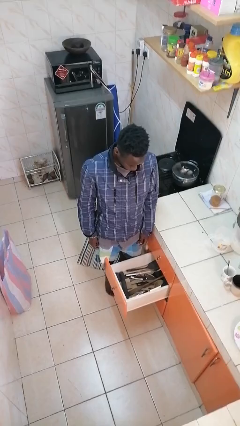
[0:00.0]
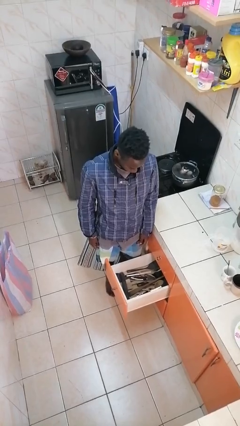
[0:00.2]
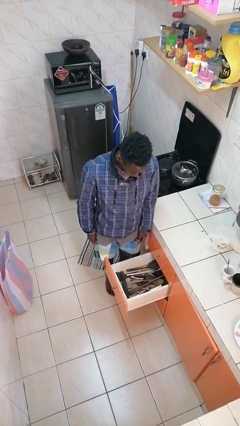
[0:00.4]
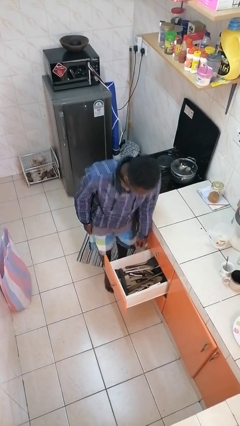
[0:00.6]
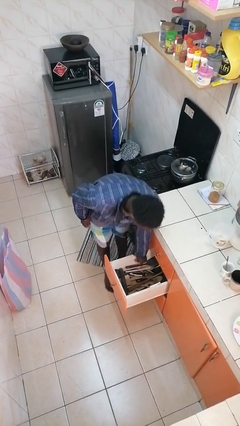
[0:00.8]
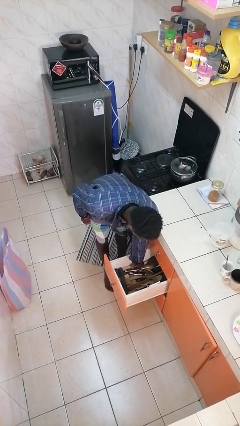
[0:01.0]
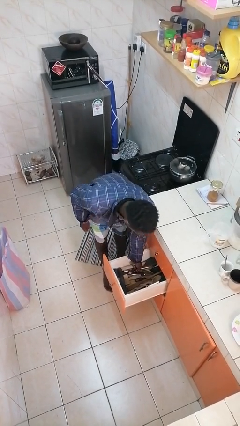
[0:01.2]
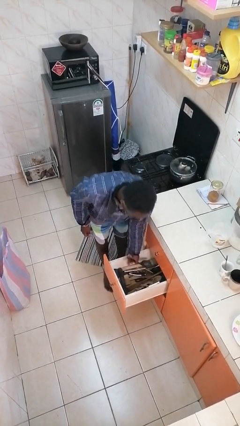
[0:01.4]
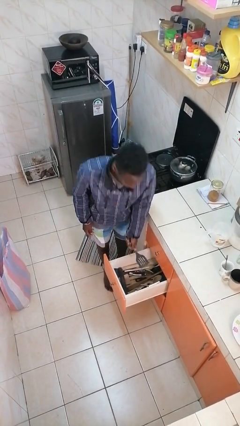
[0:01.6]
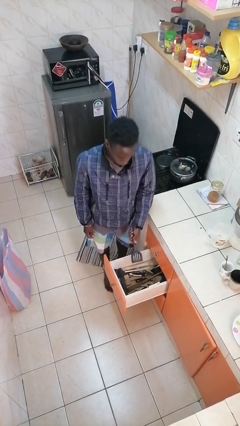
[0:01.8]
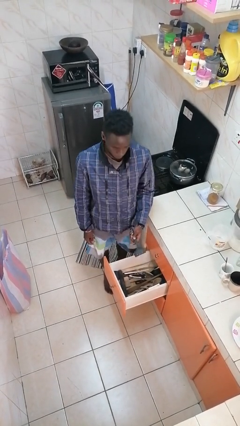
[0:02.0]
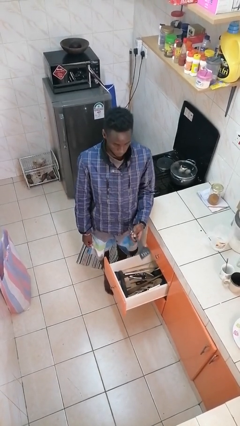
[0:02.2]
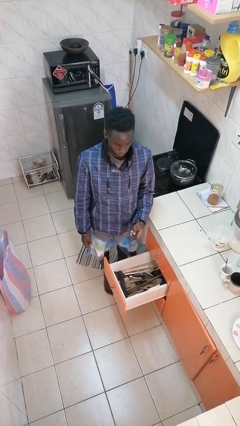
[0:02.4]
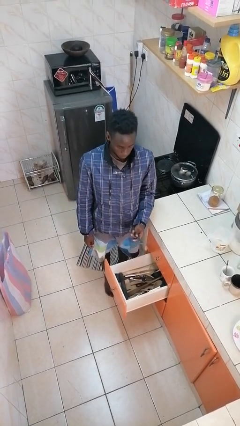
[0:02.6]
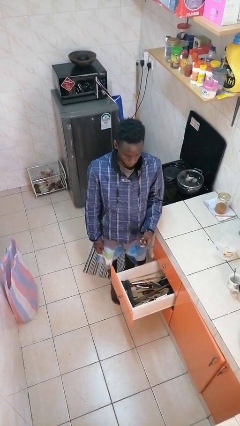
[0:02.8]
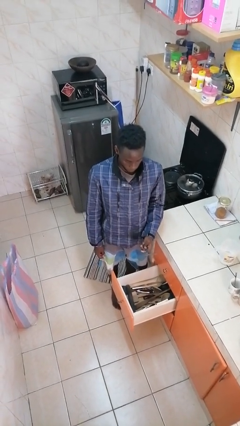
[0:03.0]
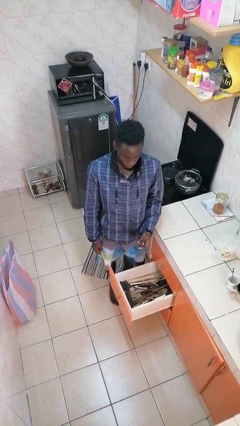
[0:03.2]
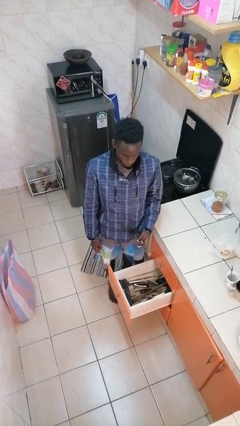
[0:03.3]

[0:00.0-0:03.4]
person takes object from kitchen drawer

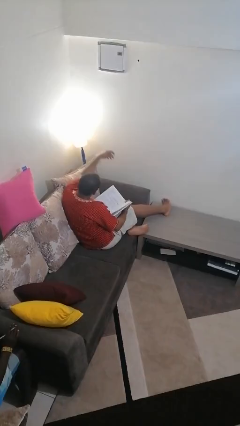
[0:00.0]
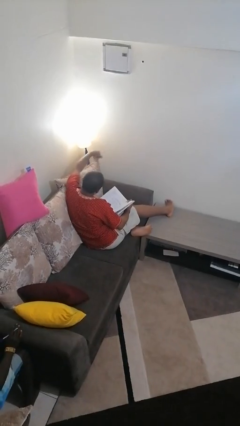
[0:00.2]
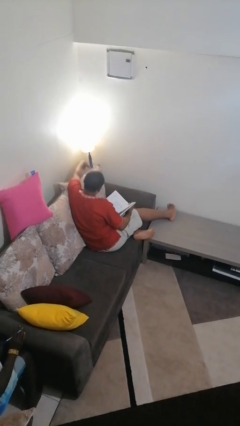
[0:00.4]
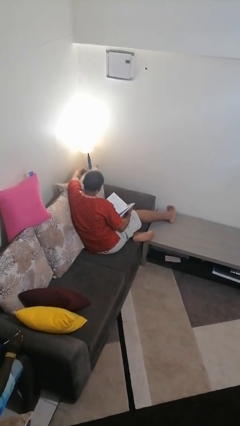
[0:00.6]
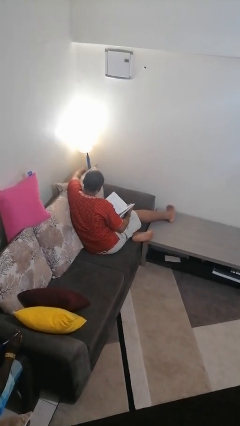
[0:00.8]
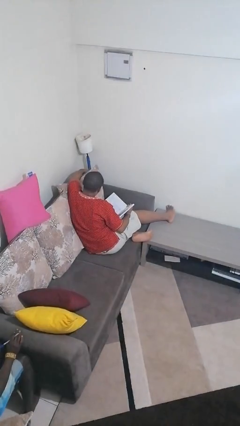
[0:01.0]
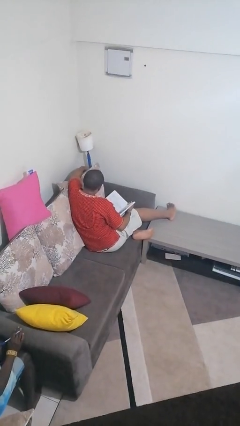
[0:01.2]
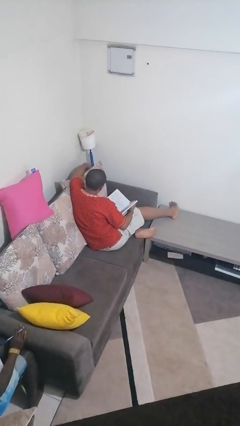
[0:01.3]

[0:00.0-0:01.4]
person turns off lamp

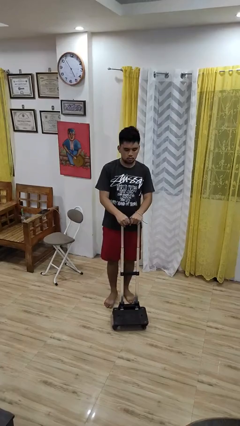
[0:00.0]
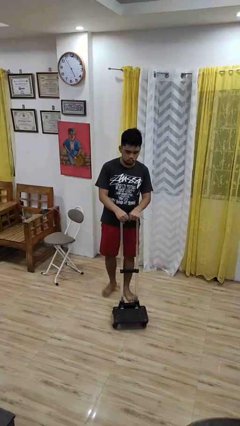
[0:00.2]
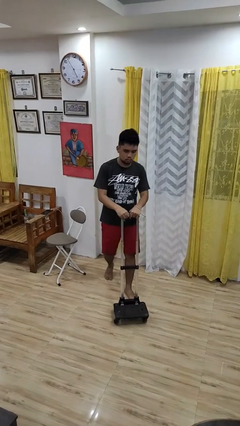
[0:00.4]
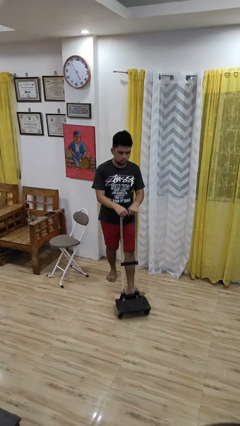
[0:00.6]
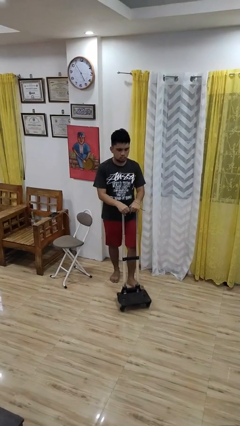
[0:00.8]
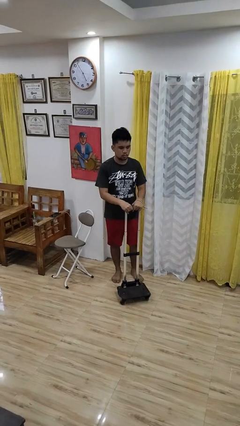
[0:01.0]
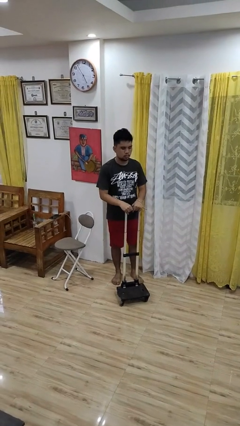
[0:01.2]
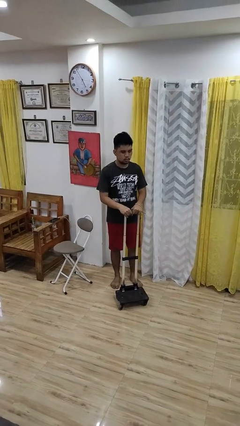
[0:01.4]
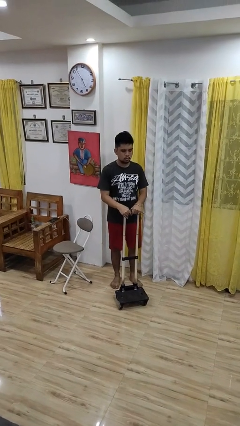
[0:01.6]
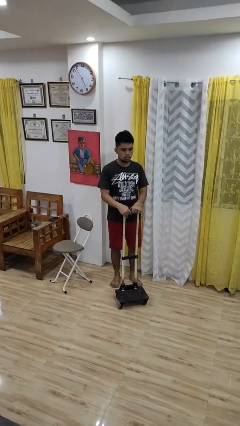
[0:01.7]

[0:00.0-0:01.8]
person pulls wheeled cart
